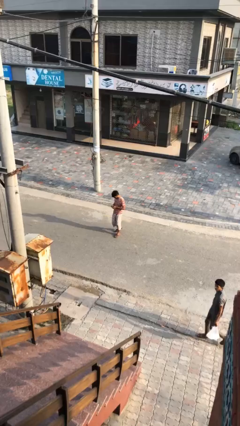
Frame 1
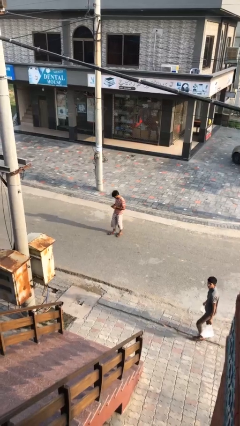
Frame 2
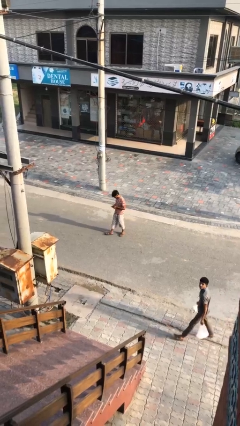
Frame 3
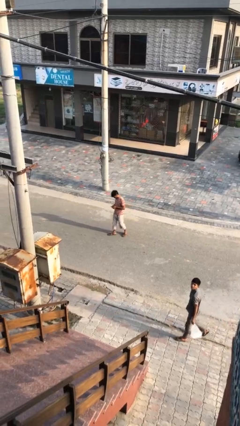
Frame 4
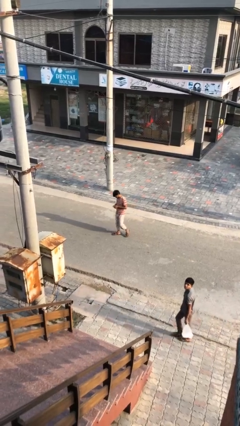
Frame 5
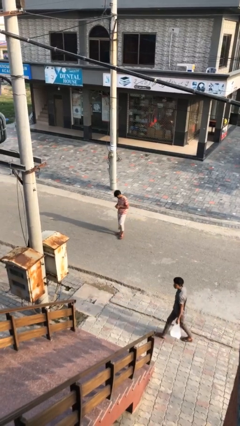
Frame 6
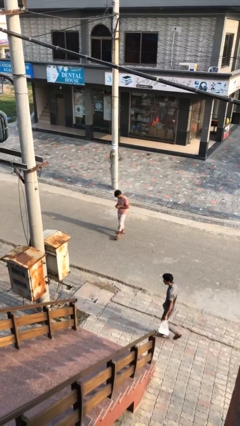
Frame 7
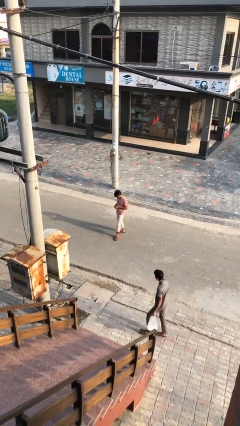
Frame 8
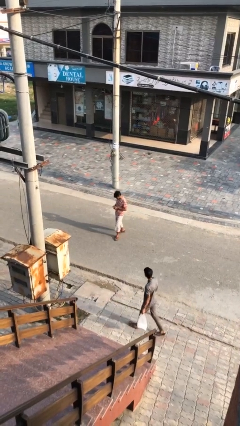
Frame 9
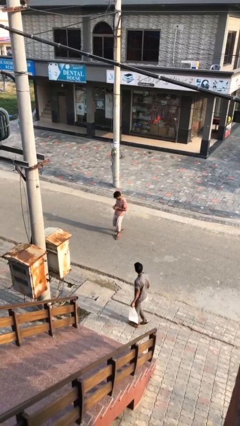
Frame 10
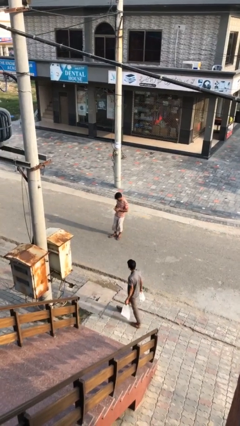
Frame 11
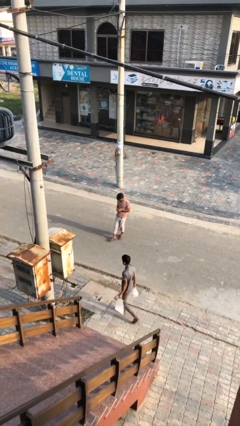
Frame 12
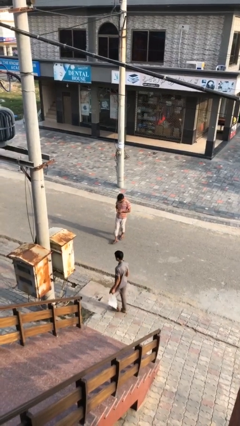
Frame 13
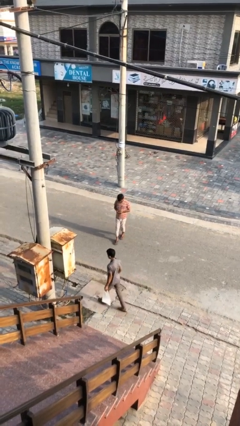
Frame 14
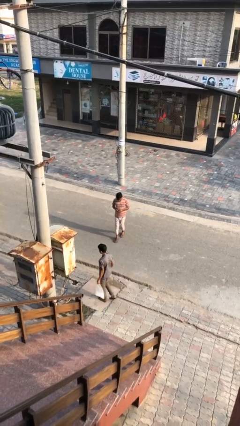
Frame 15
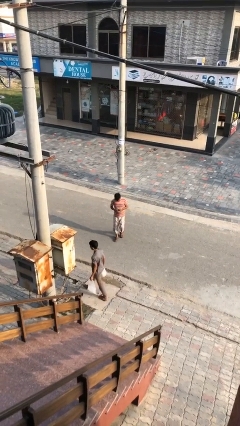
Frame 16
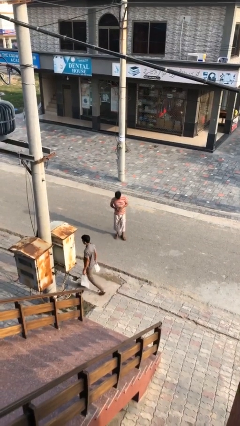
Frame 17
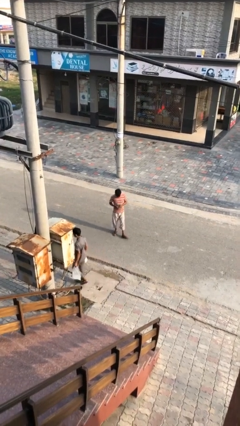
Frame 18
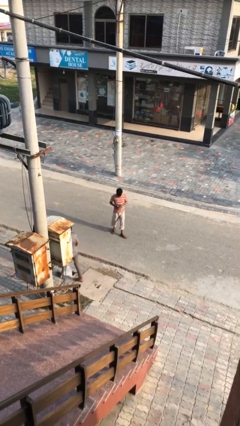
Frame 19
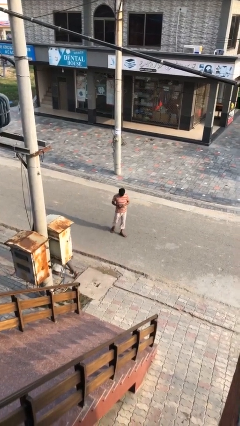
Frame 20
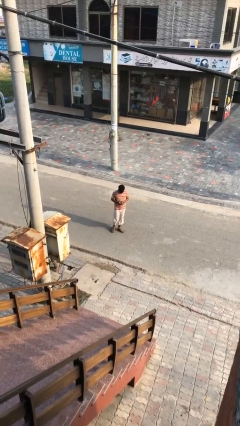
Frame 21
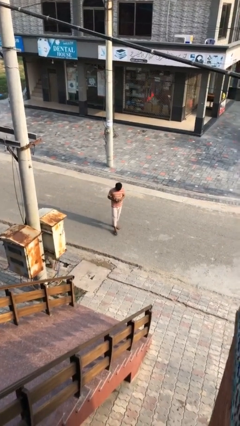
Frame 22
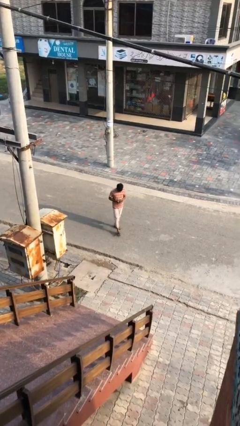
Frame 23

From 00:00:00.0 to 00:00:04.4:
person texts on phone

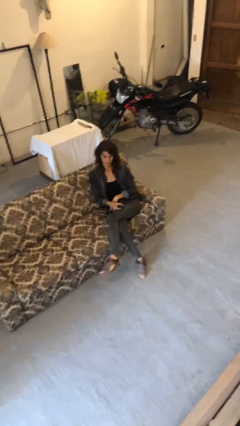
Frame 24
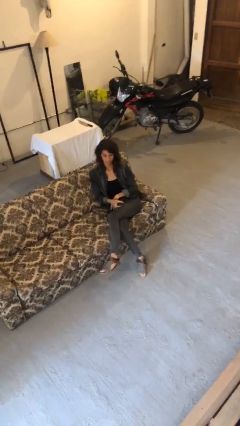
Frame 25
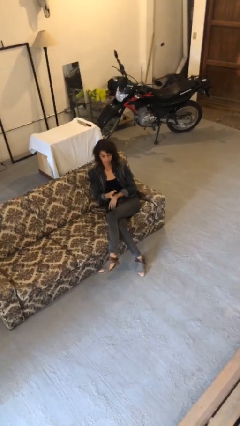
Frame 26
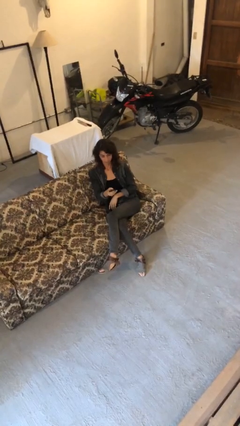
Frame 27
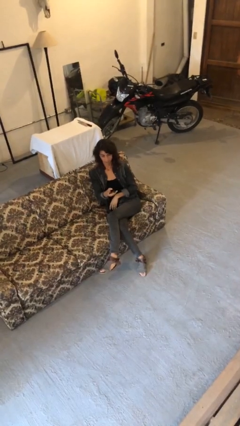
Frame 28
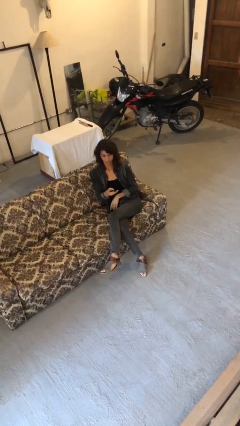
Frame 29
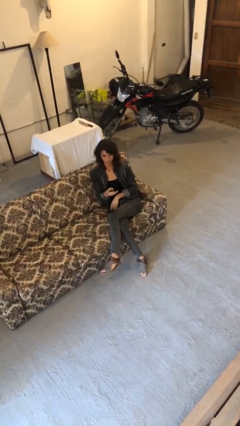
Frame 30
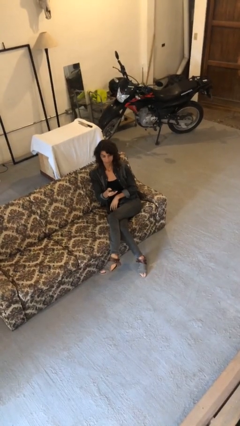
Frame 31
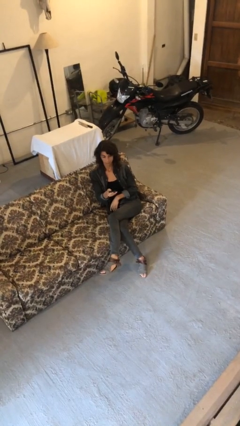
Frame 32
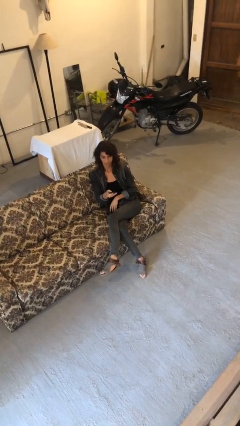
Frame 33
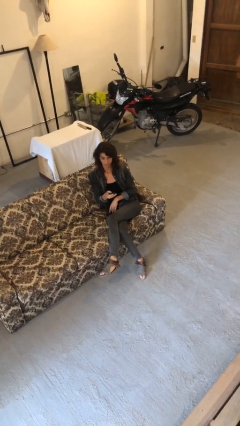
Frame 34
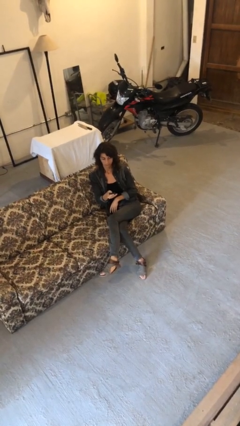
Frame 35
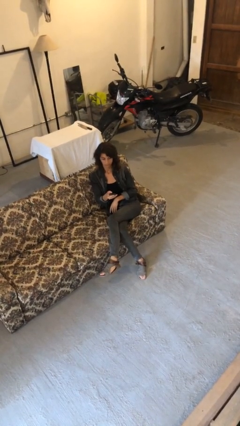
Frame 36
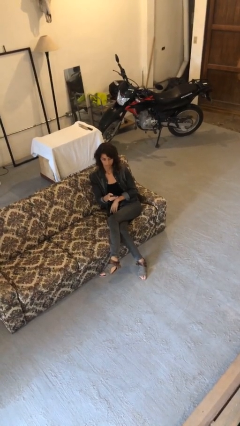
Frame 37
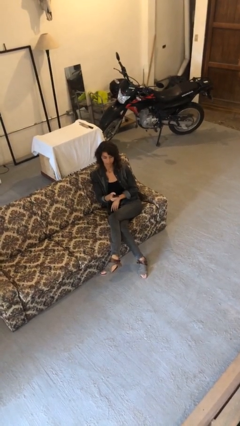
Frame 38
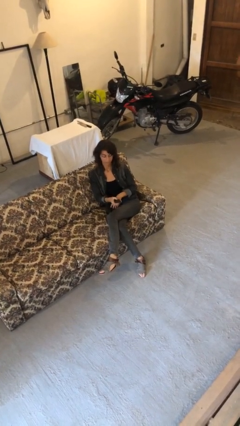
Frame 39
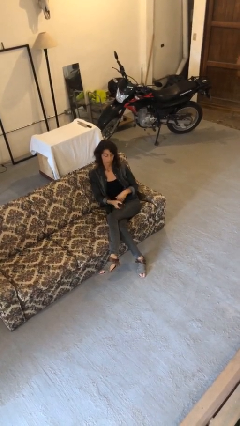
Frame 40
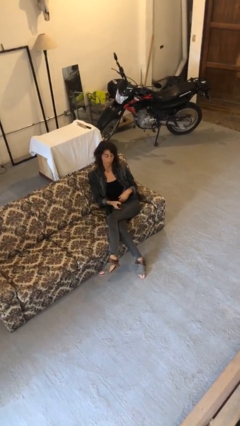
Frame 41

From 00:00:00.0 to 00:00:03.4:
person uses television remote

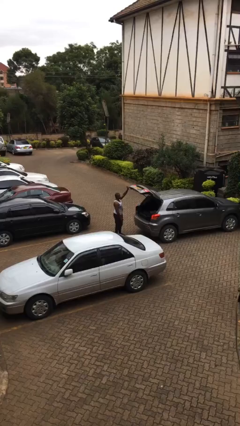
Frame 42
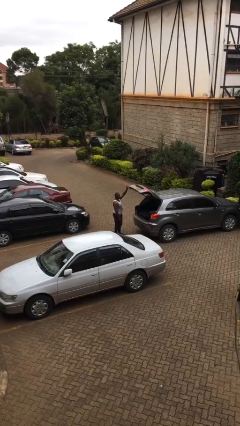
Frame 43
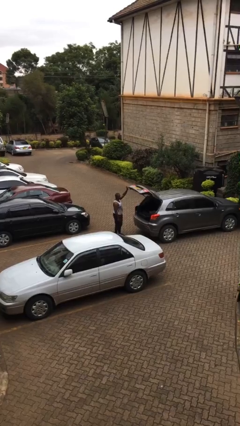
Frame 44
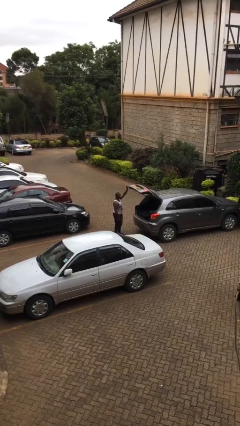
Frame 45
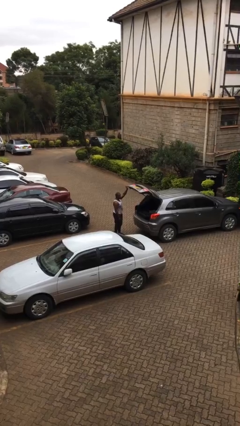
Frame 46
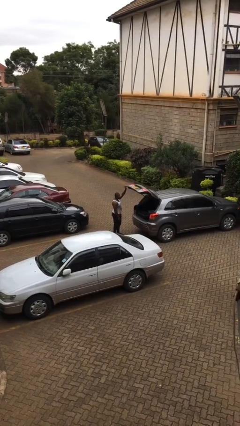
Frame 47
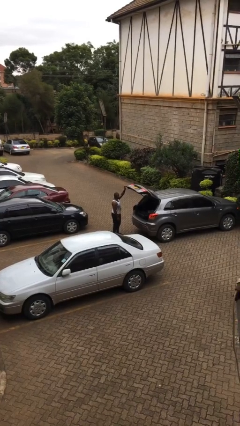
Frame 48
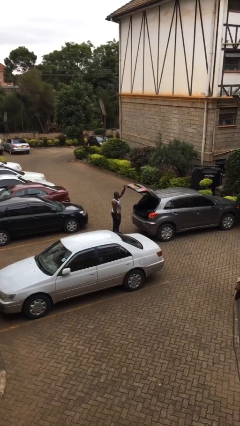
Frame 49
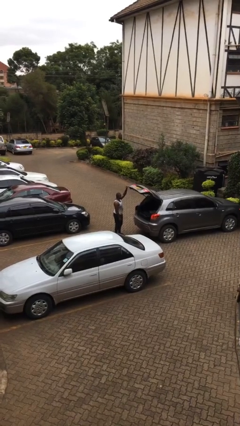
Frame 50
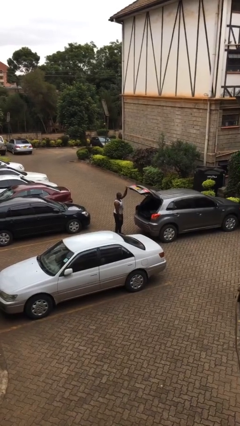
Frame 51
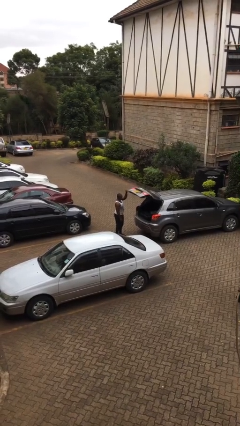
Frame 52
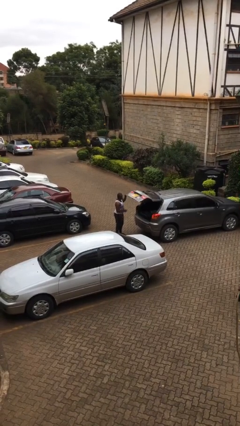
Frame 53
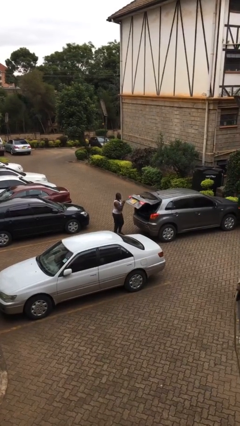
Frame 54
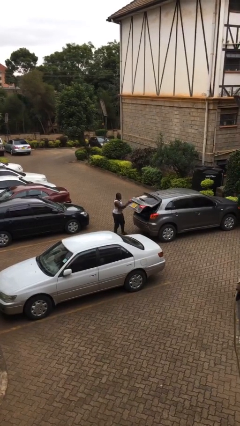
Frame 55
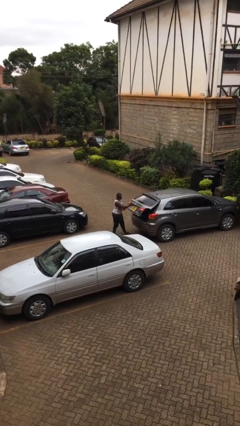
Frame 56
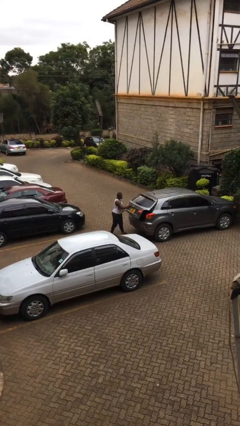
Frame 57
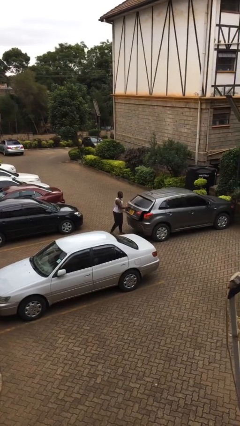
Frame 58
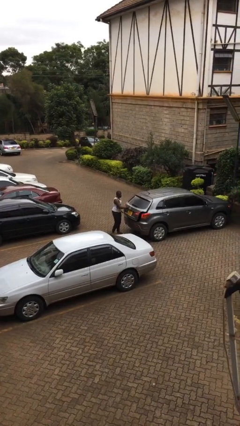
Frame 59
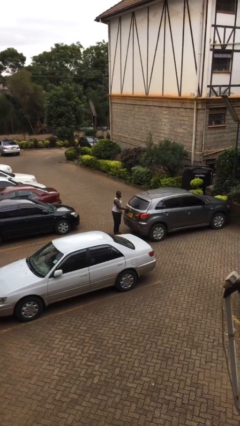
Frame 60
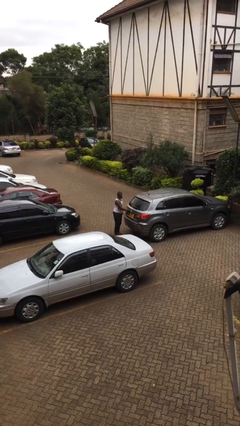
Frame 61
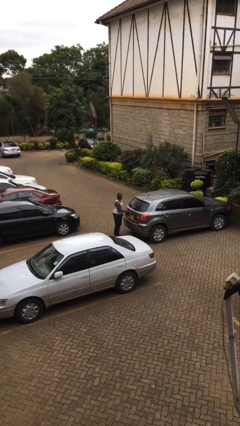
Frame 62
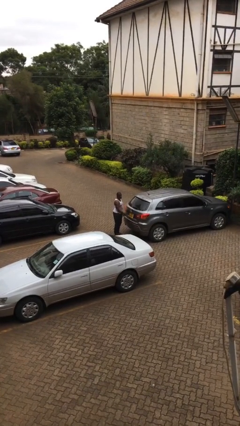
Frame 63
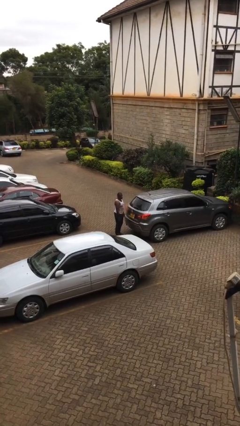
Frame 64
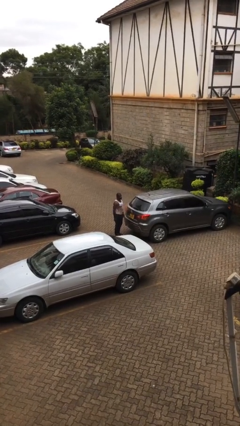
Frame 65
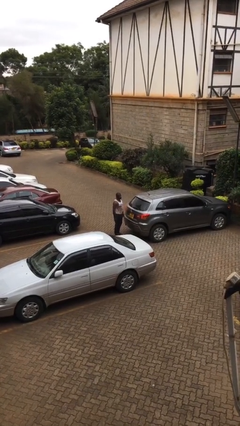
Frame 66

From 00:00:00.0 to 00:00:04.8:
person closes car trunk

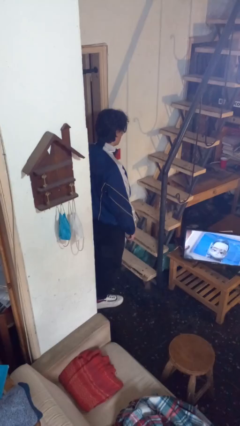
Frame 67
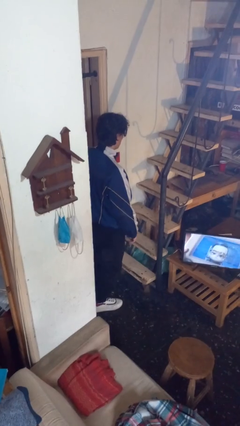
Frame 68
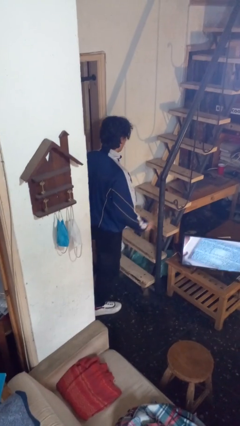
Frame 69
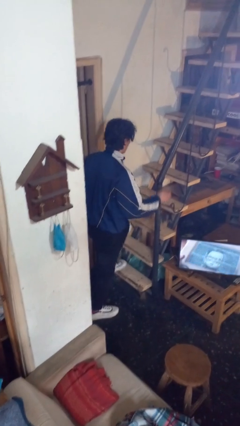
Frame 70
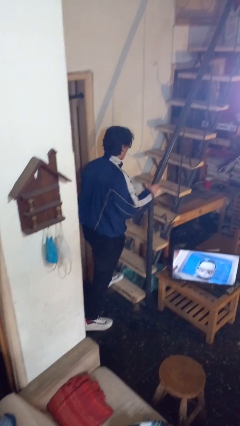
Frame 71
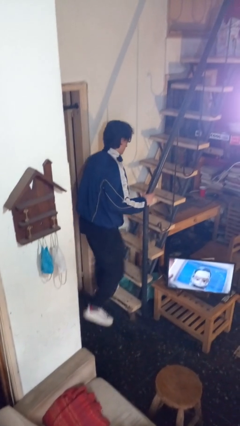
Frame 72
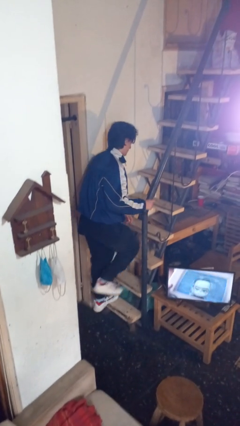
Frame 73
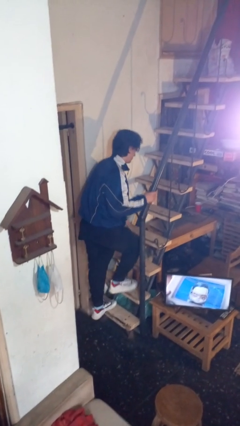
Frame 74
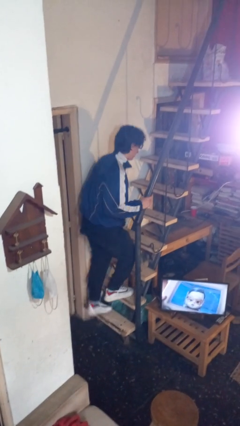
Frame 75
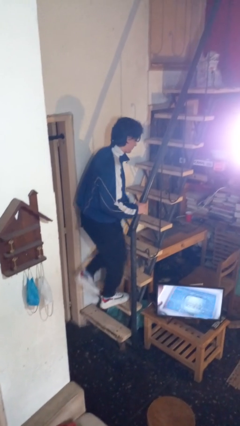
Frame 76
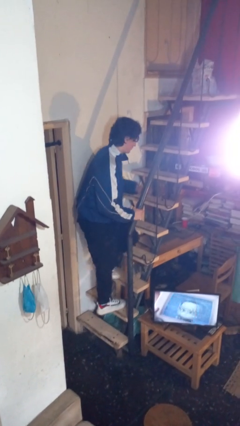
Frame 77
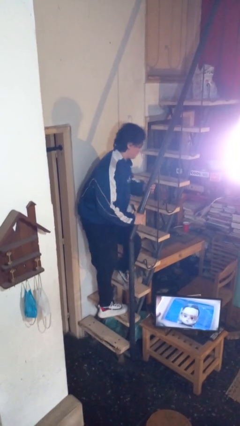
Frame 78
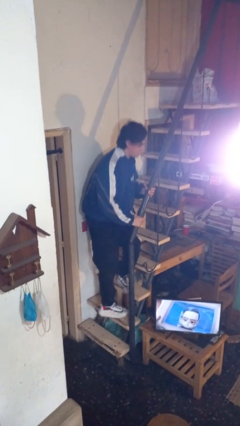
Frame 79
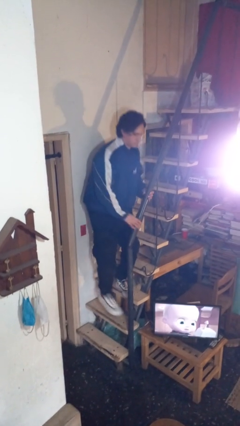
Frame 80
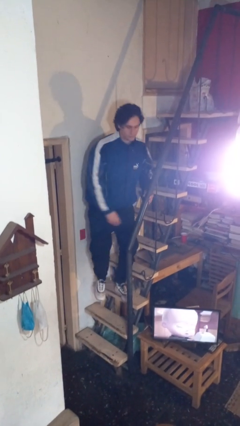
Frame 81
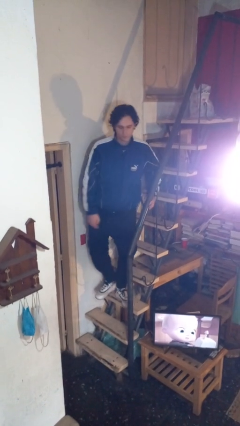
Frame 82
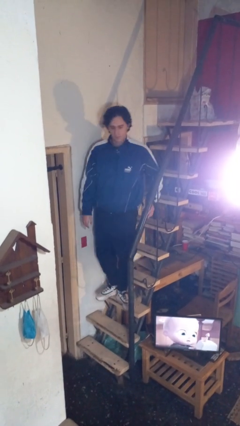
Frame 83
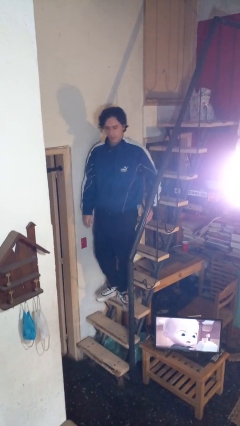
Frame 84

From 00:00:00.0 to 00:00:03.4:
person climbs up stairs

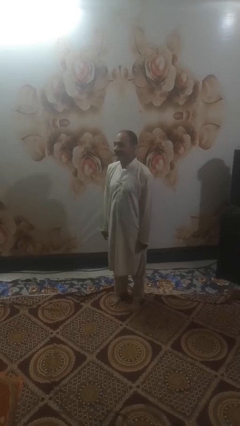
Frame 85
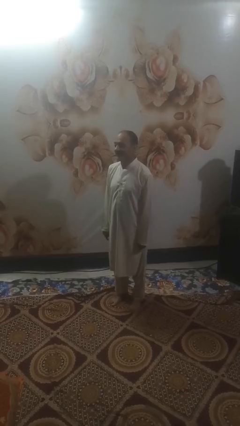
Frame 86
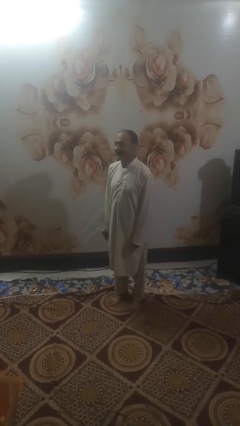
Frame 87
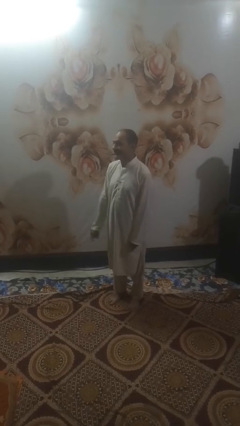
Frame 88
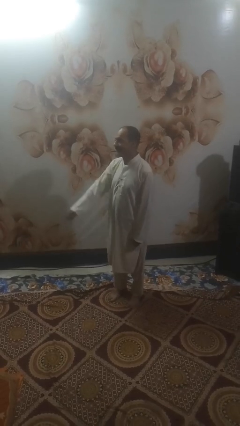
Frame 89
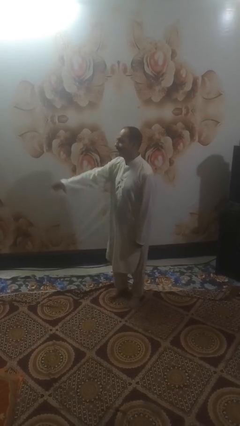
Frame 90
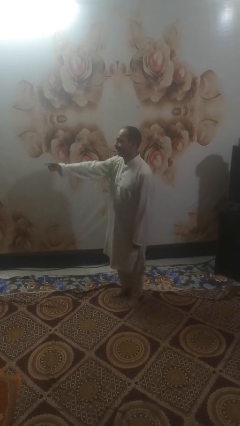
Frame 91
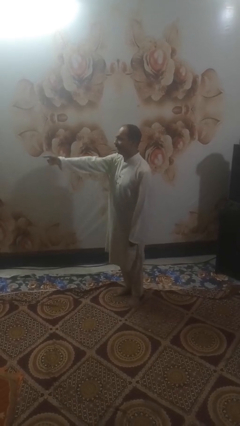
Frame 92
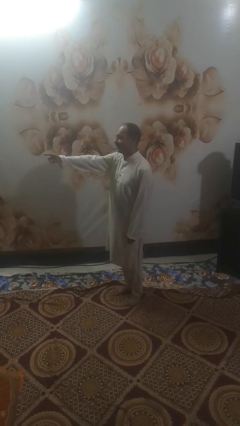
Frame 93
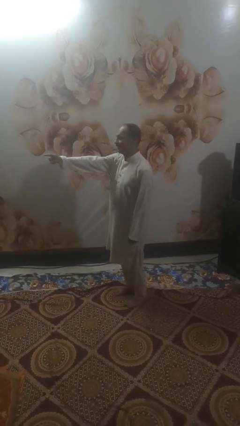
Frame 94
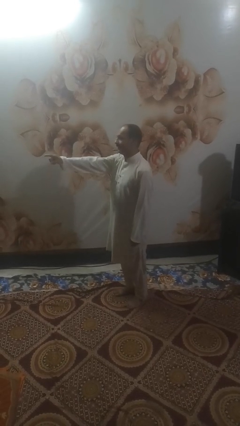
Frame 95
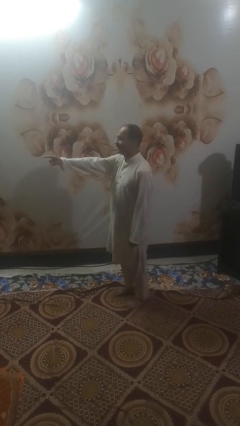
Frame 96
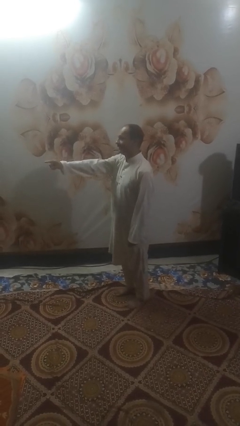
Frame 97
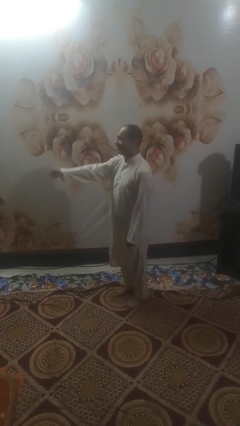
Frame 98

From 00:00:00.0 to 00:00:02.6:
person points at person
